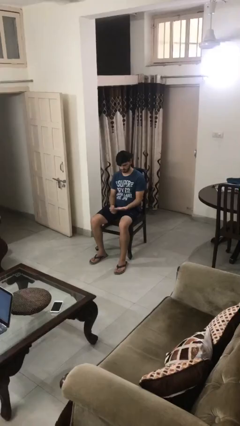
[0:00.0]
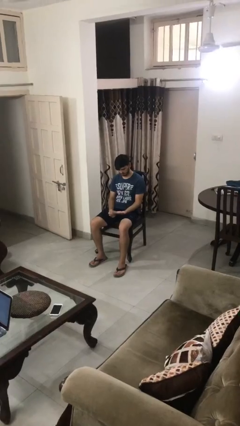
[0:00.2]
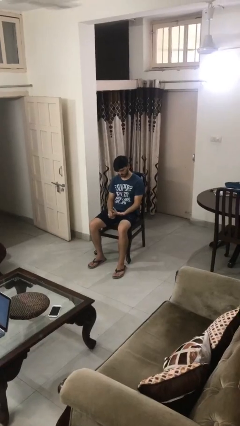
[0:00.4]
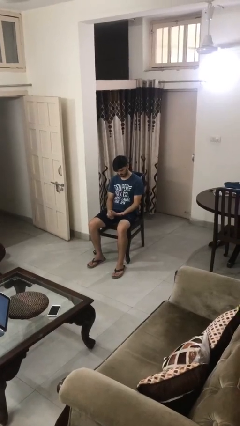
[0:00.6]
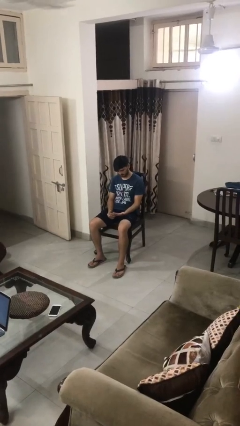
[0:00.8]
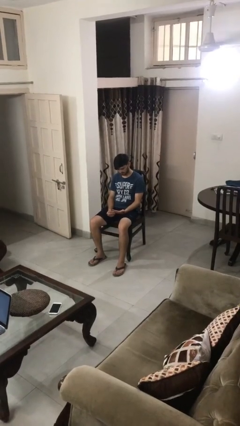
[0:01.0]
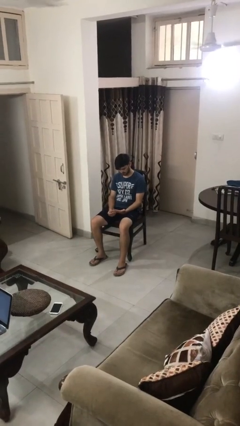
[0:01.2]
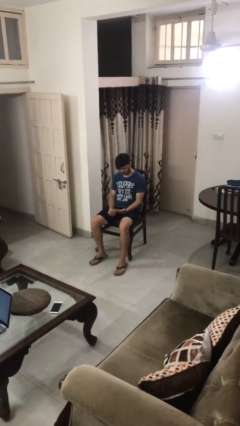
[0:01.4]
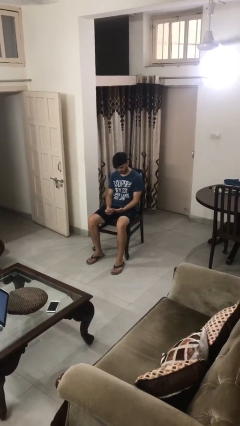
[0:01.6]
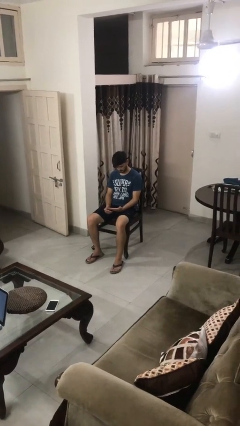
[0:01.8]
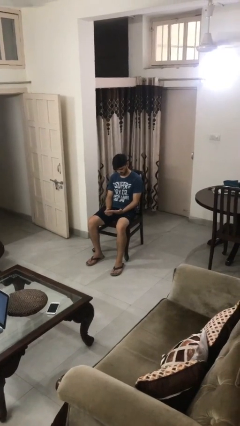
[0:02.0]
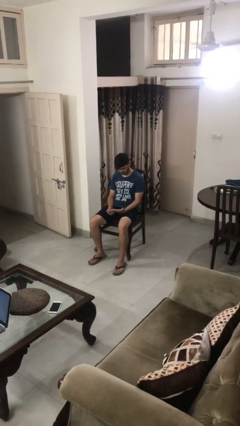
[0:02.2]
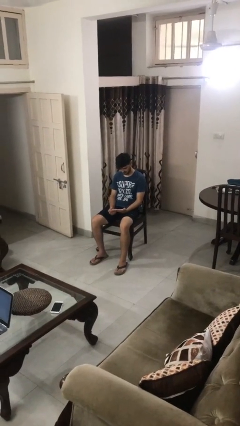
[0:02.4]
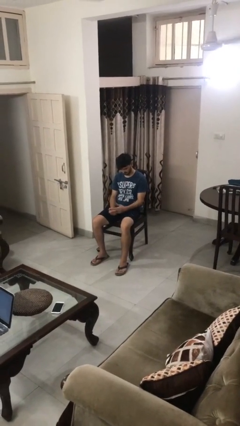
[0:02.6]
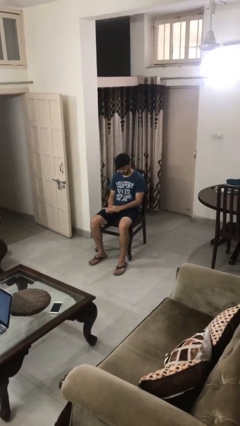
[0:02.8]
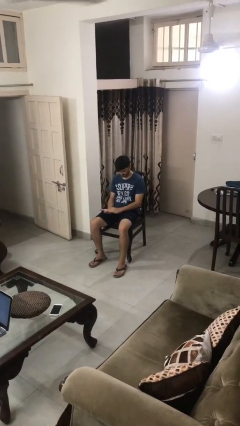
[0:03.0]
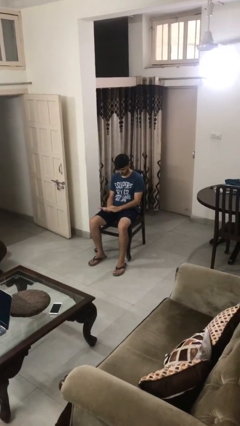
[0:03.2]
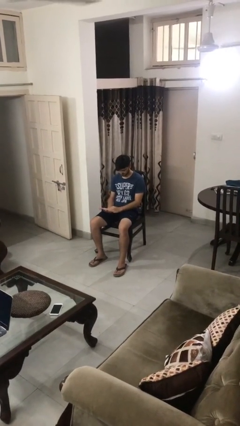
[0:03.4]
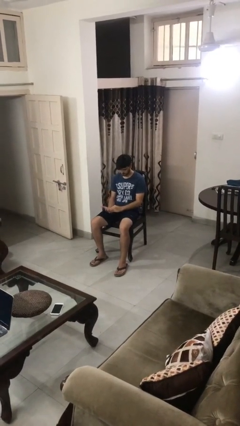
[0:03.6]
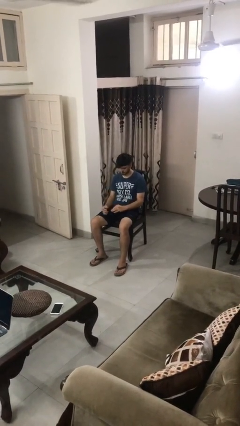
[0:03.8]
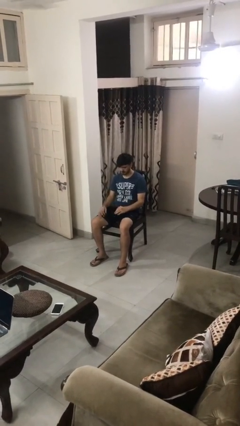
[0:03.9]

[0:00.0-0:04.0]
person looks at hands in lap

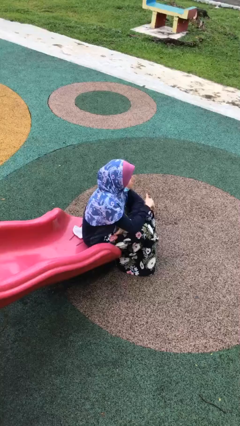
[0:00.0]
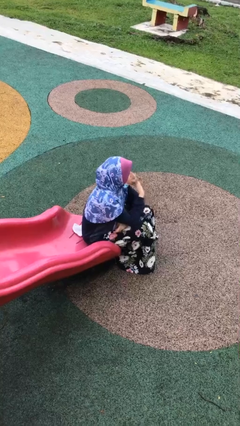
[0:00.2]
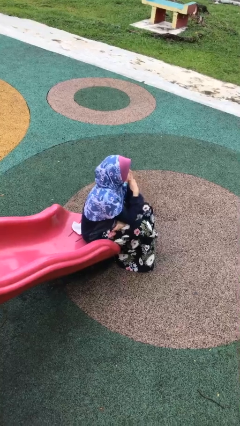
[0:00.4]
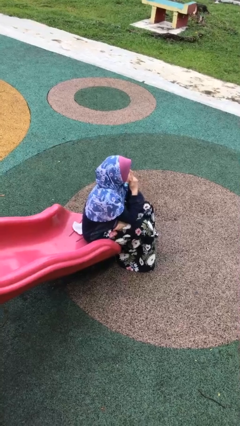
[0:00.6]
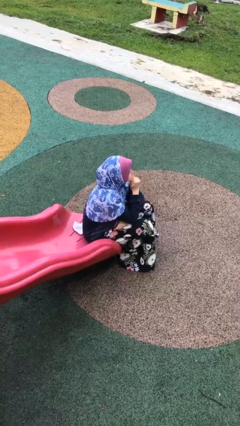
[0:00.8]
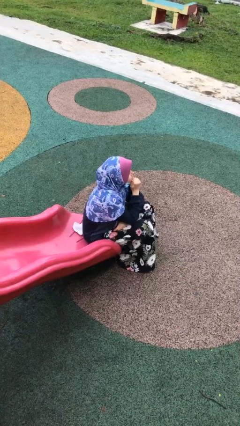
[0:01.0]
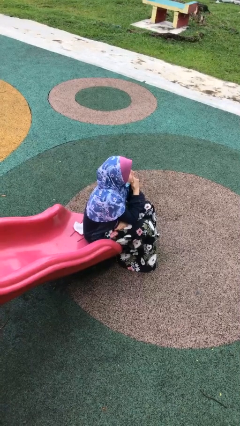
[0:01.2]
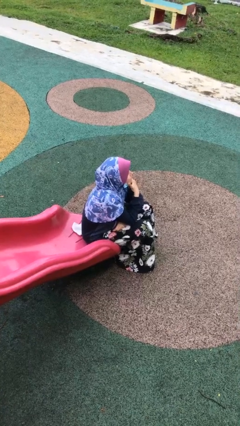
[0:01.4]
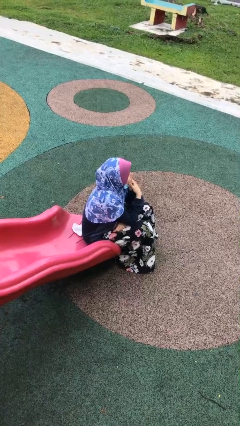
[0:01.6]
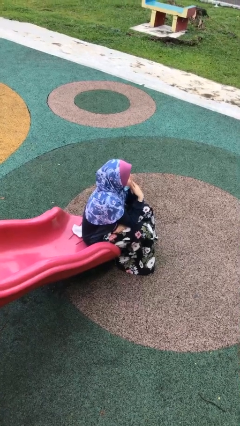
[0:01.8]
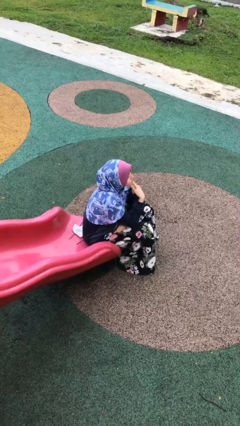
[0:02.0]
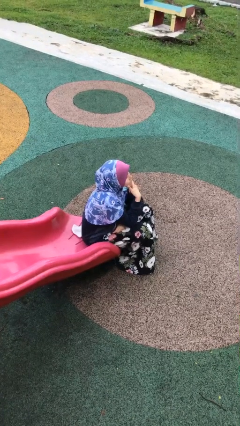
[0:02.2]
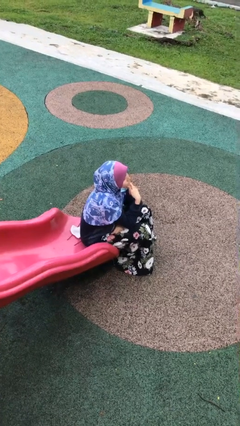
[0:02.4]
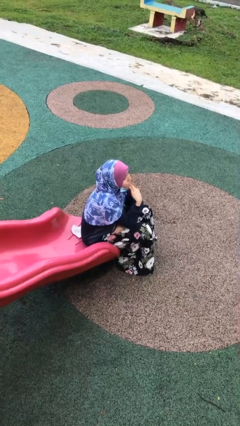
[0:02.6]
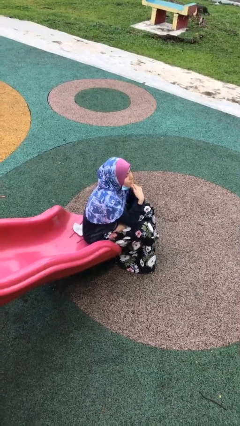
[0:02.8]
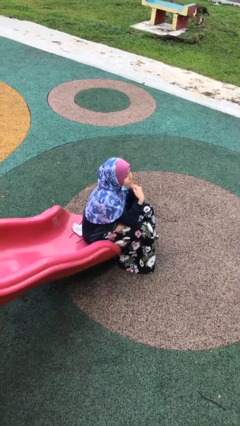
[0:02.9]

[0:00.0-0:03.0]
person strokes chin

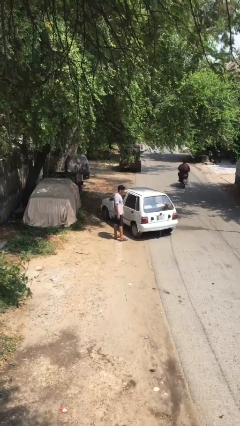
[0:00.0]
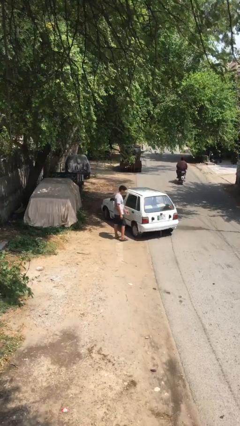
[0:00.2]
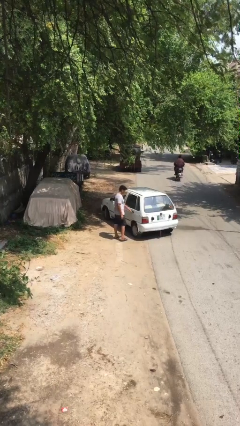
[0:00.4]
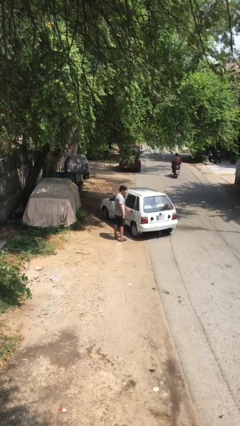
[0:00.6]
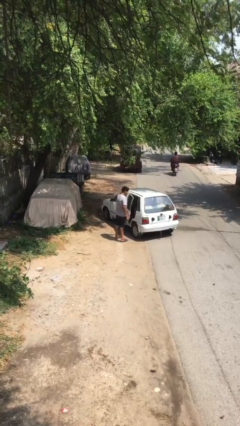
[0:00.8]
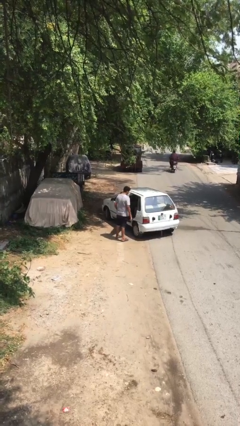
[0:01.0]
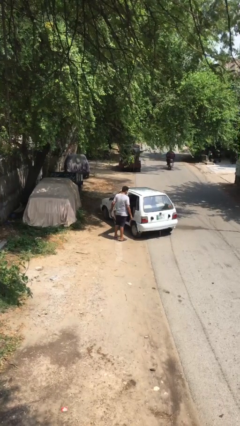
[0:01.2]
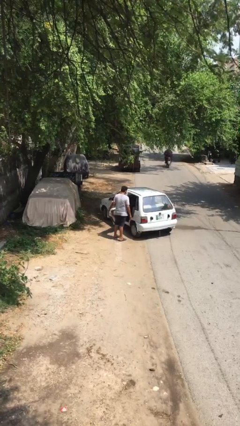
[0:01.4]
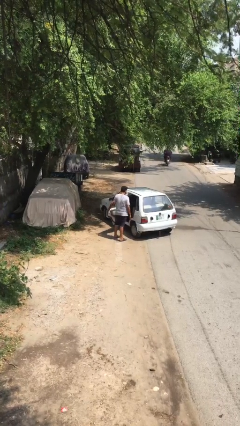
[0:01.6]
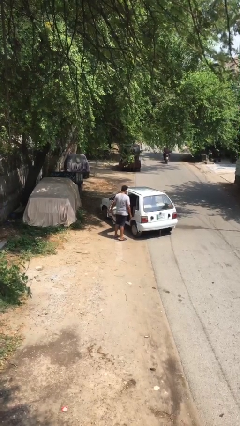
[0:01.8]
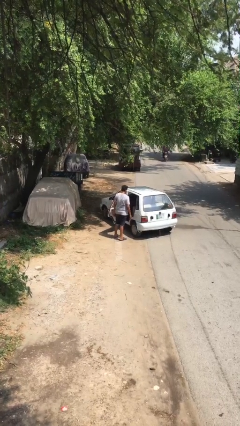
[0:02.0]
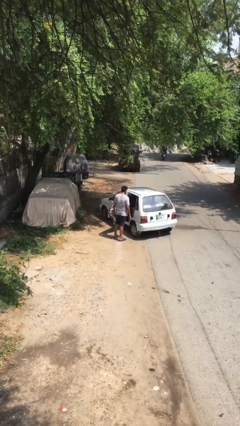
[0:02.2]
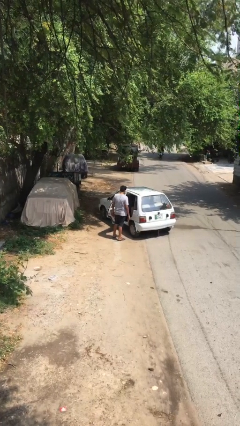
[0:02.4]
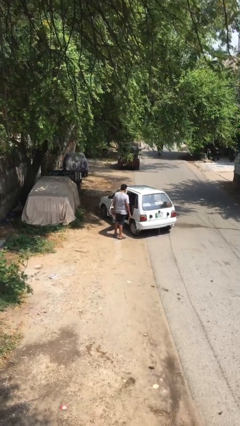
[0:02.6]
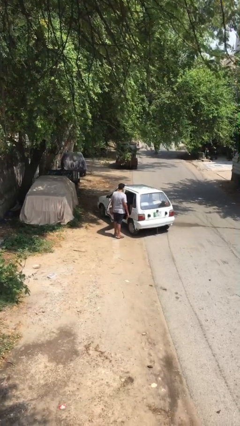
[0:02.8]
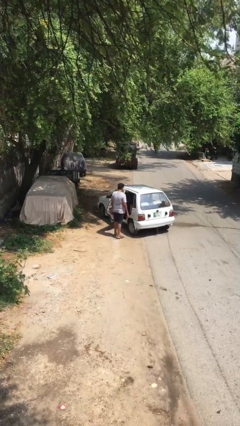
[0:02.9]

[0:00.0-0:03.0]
person opens car door

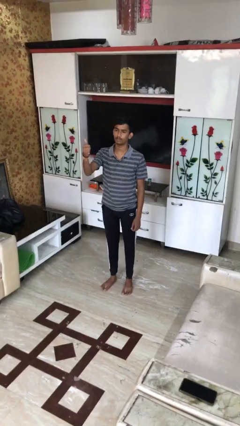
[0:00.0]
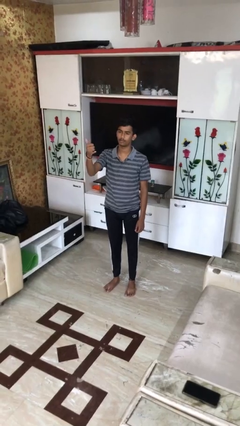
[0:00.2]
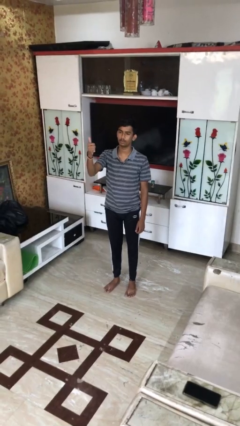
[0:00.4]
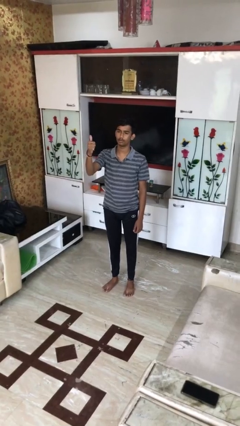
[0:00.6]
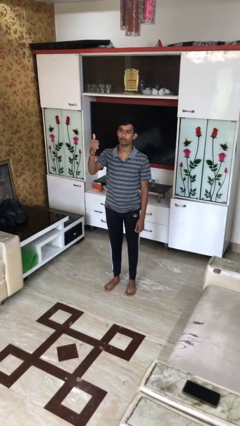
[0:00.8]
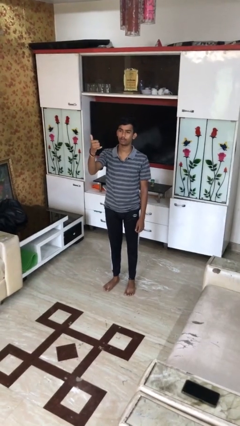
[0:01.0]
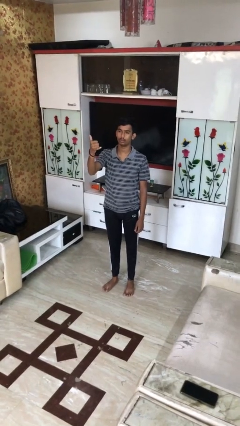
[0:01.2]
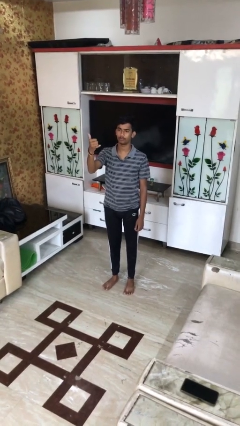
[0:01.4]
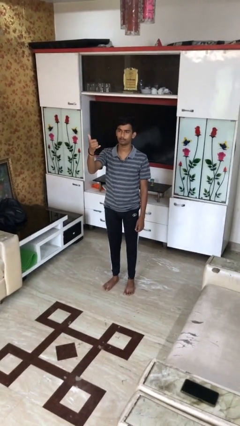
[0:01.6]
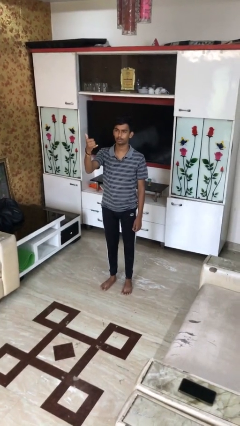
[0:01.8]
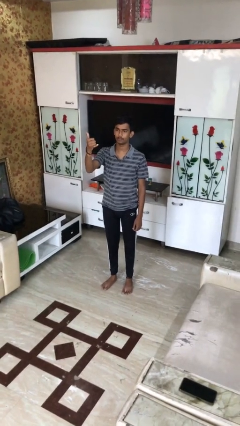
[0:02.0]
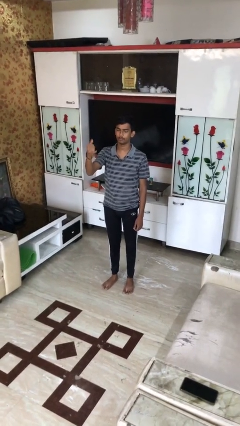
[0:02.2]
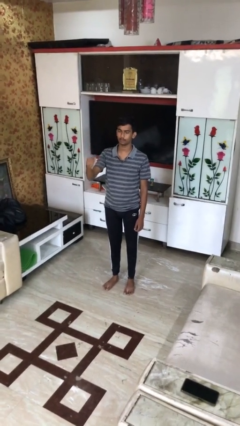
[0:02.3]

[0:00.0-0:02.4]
person gestures hang loose

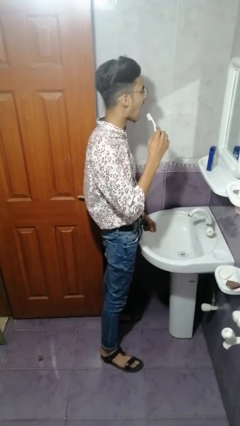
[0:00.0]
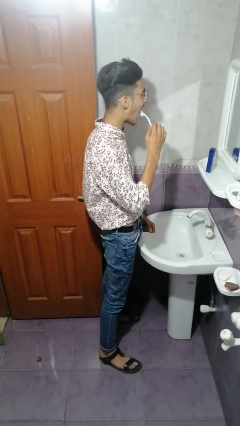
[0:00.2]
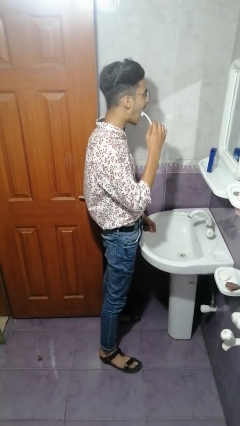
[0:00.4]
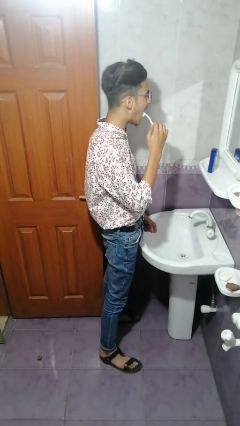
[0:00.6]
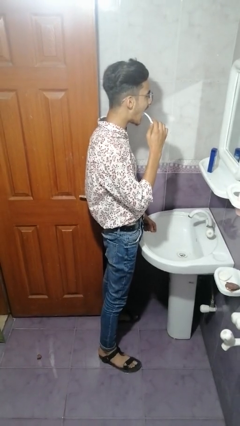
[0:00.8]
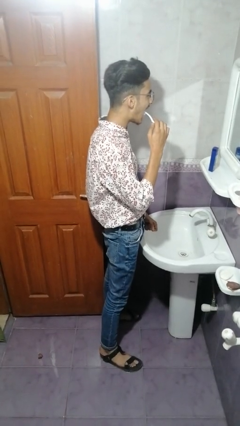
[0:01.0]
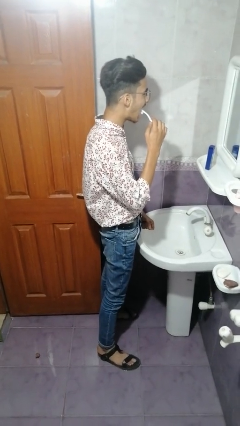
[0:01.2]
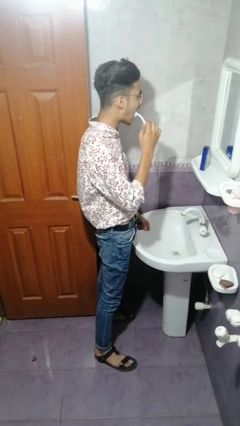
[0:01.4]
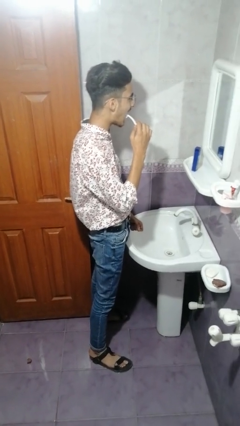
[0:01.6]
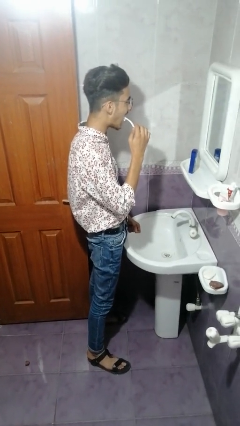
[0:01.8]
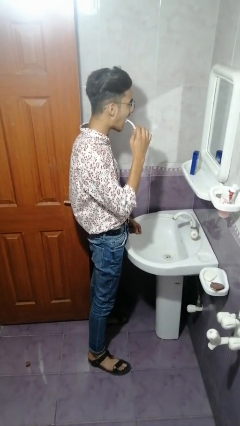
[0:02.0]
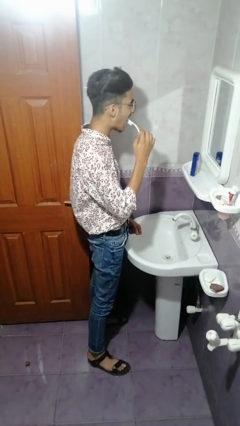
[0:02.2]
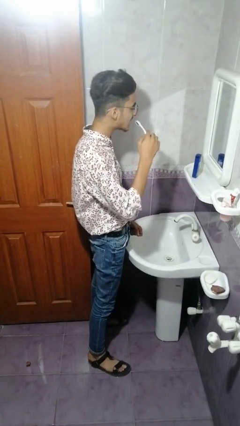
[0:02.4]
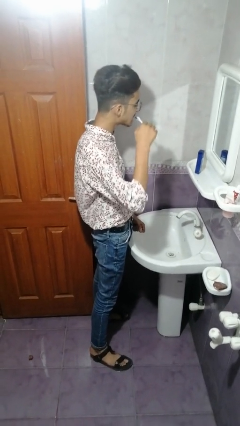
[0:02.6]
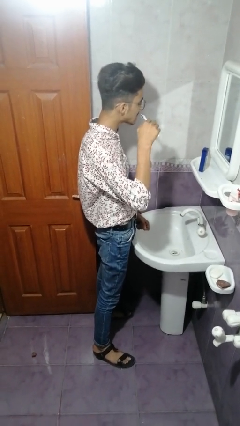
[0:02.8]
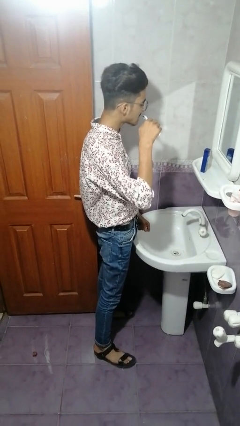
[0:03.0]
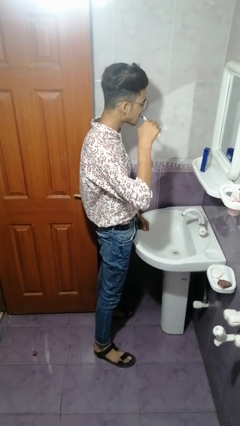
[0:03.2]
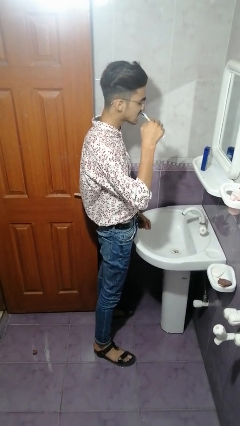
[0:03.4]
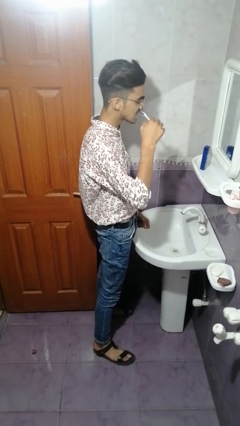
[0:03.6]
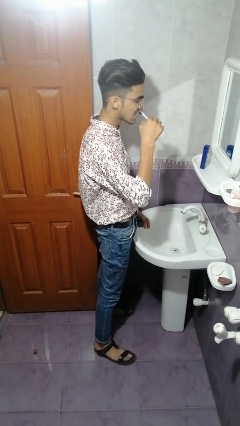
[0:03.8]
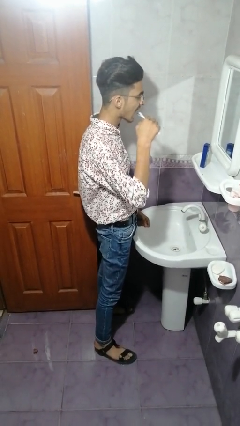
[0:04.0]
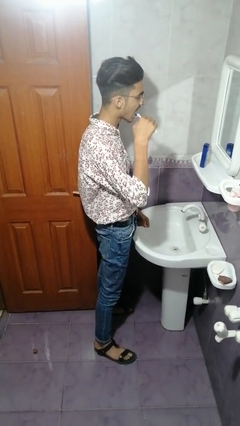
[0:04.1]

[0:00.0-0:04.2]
person brushes teeth

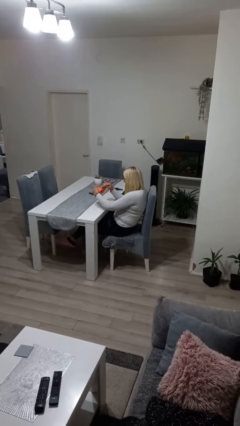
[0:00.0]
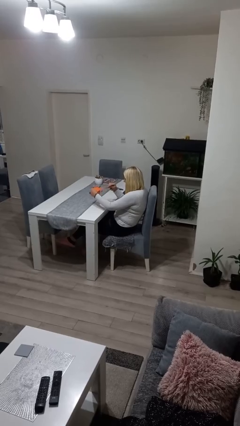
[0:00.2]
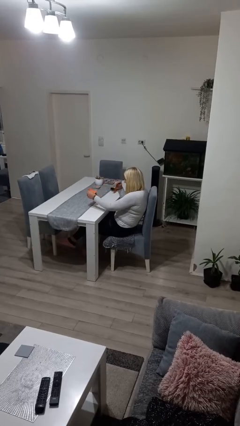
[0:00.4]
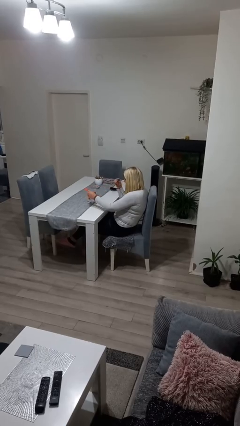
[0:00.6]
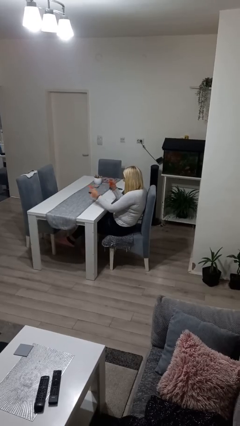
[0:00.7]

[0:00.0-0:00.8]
person tears paper
